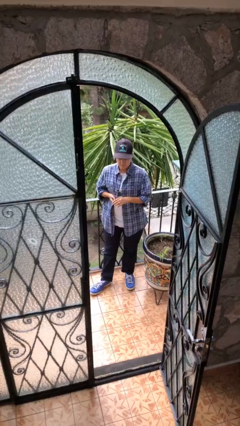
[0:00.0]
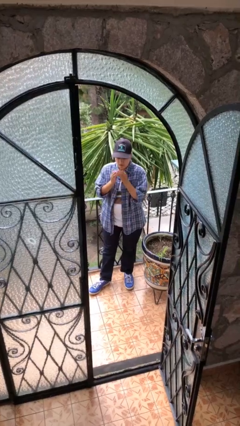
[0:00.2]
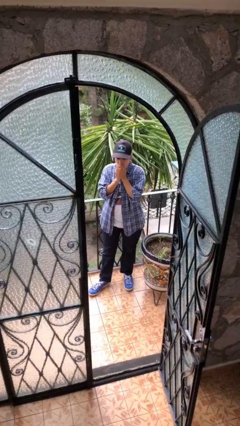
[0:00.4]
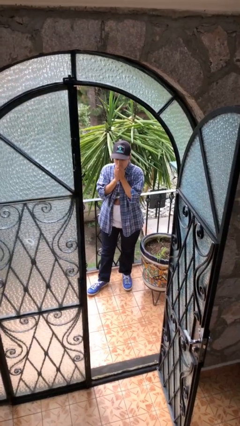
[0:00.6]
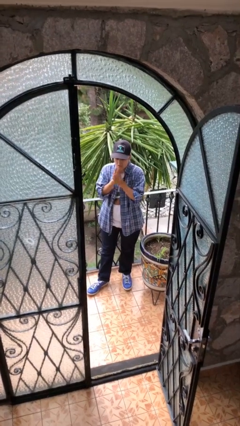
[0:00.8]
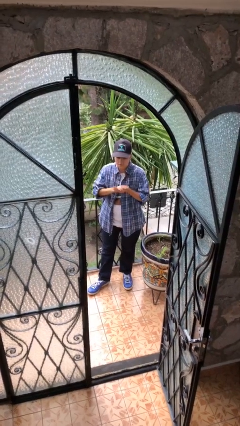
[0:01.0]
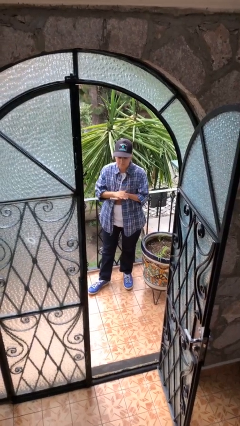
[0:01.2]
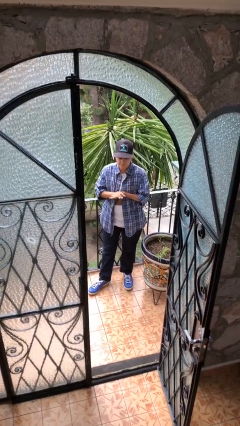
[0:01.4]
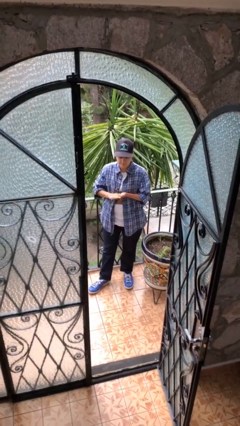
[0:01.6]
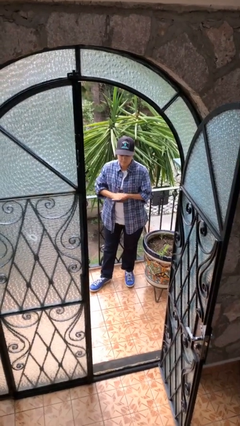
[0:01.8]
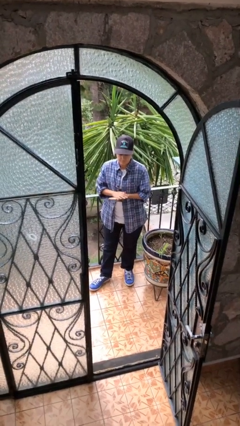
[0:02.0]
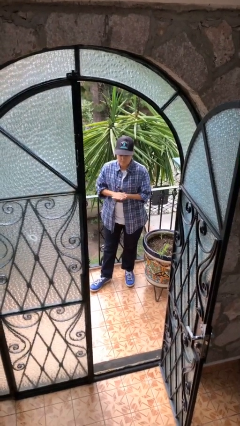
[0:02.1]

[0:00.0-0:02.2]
person blows into hands

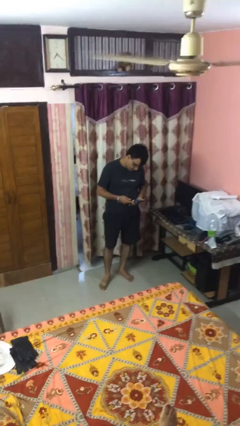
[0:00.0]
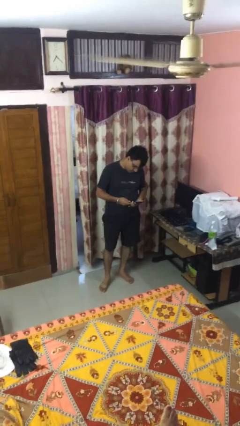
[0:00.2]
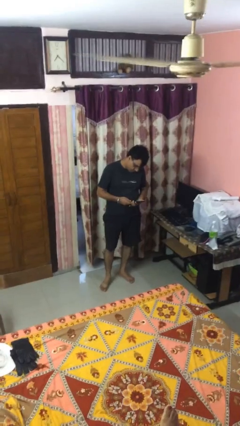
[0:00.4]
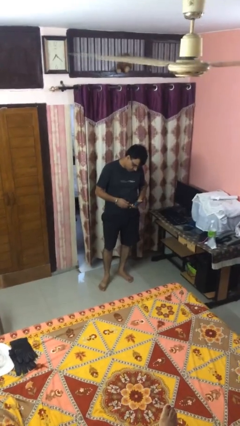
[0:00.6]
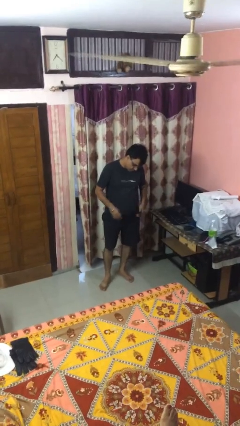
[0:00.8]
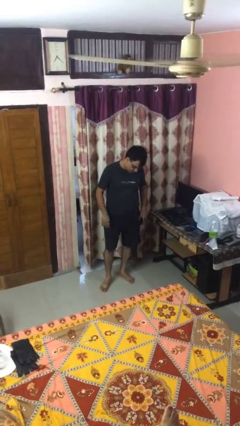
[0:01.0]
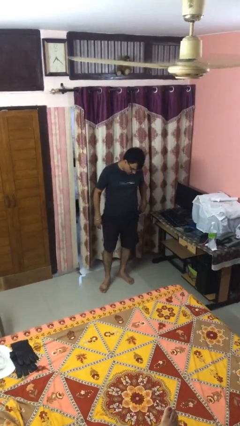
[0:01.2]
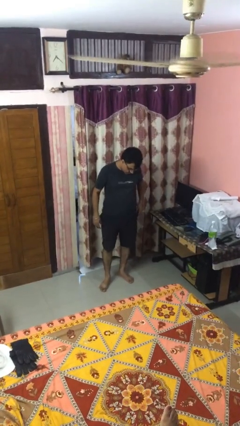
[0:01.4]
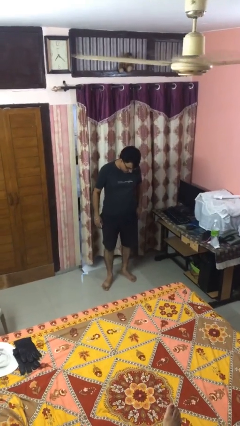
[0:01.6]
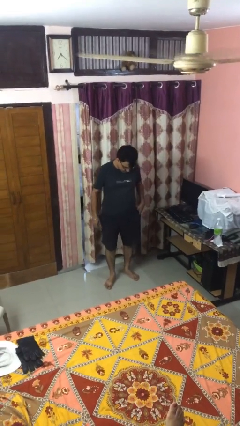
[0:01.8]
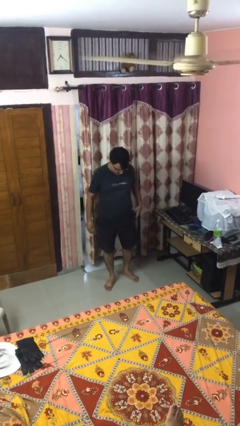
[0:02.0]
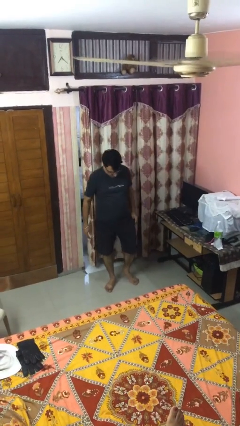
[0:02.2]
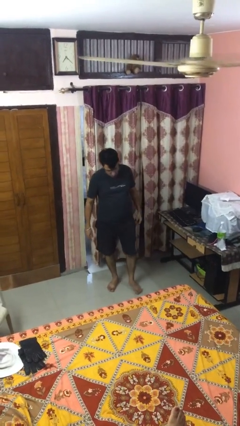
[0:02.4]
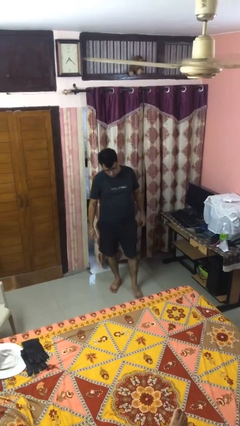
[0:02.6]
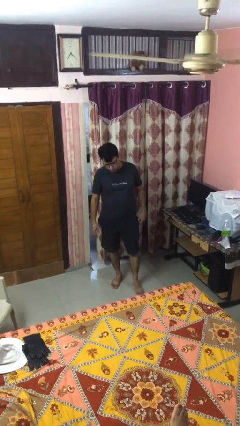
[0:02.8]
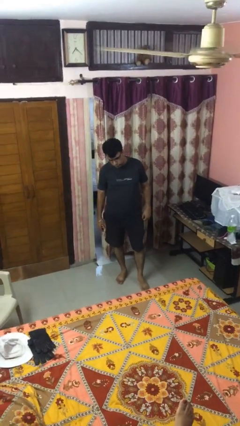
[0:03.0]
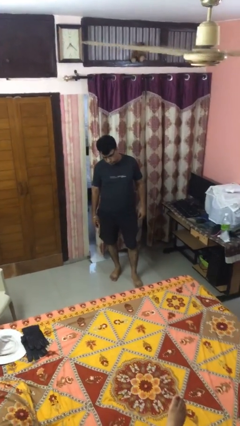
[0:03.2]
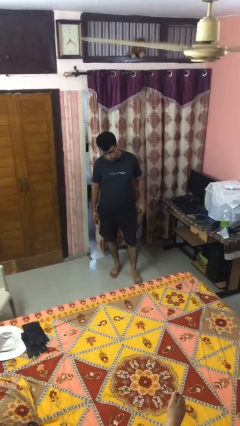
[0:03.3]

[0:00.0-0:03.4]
person puts phone into pocket

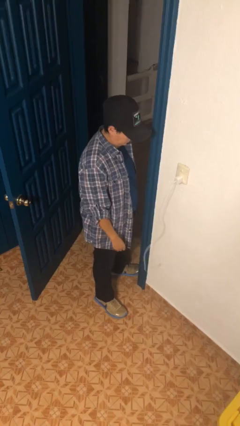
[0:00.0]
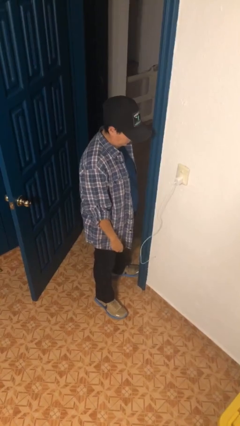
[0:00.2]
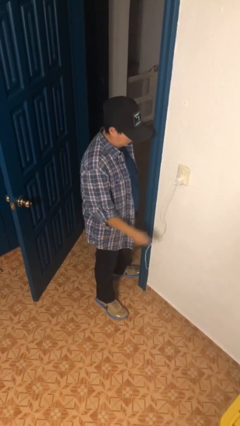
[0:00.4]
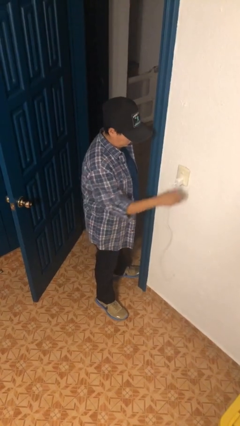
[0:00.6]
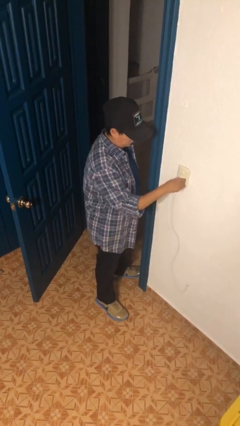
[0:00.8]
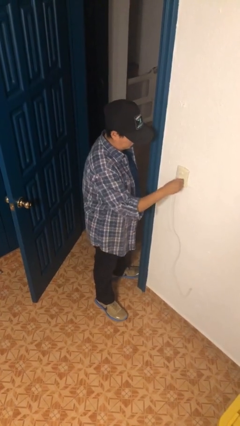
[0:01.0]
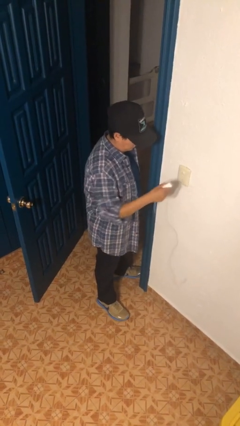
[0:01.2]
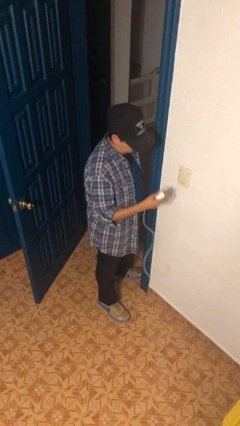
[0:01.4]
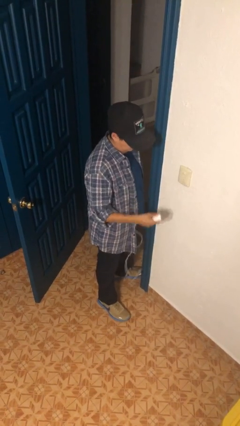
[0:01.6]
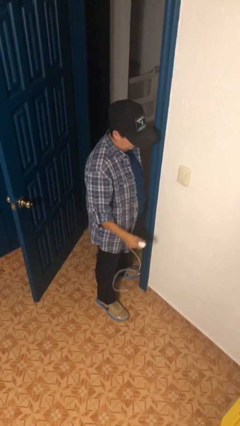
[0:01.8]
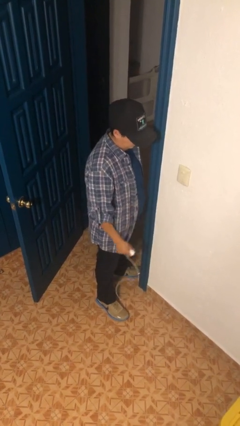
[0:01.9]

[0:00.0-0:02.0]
person unplugs from electrical socket

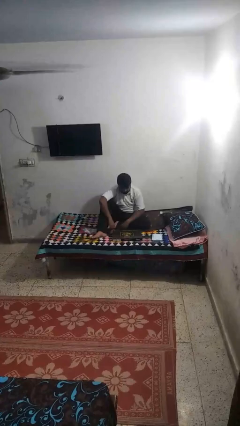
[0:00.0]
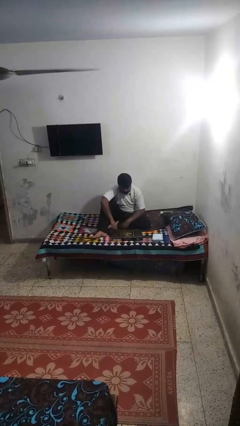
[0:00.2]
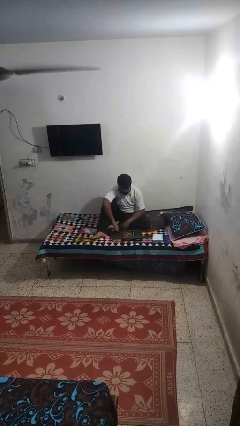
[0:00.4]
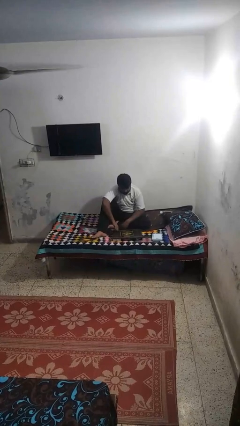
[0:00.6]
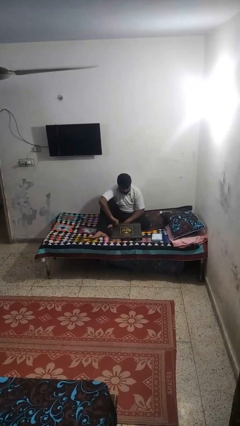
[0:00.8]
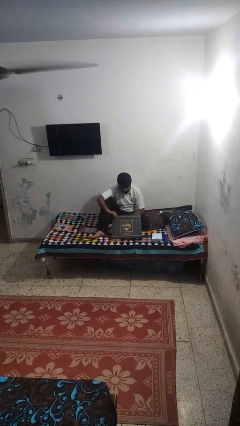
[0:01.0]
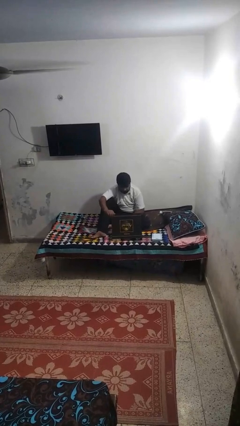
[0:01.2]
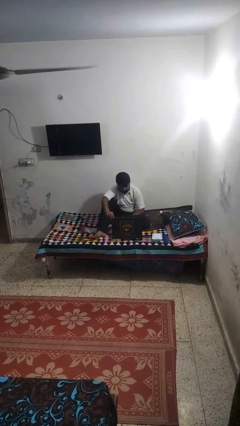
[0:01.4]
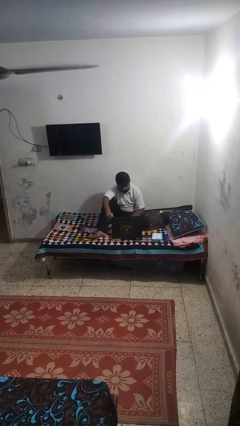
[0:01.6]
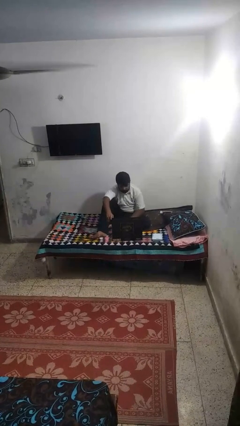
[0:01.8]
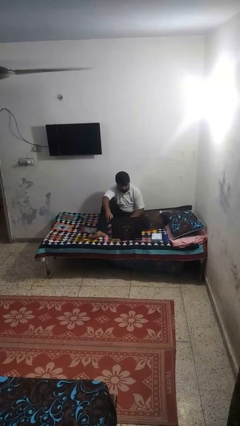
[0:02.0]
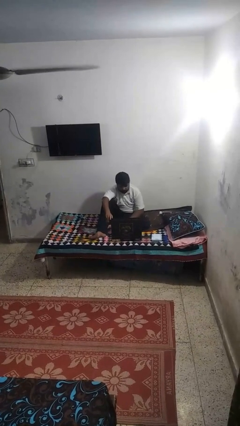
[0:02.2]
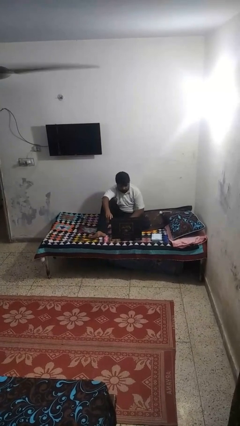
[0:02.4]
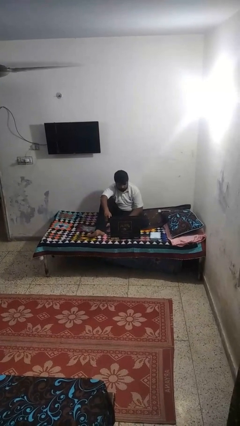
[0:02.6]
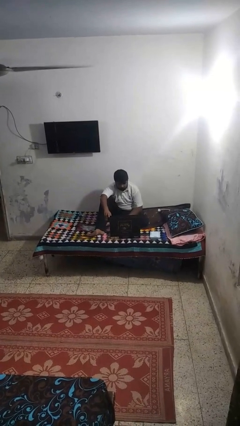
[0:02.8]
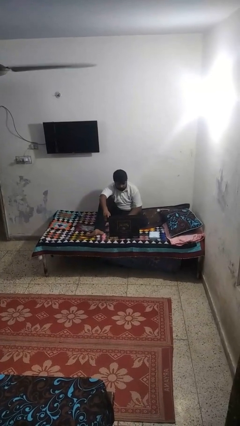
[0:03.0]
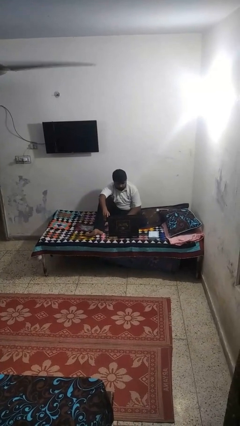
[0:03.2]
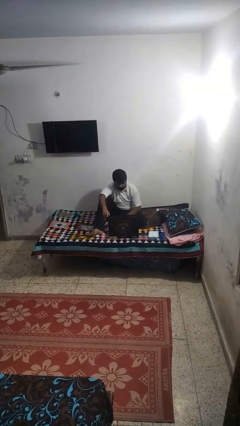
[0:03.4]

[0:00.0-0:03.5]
person opens laptop

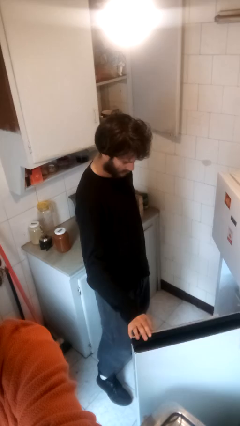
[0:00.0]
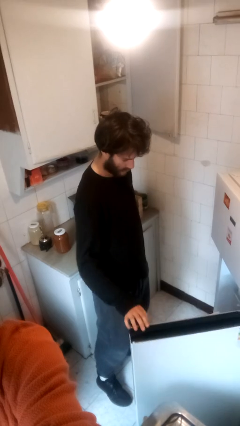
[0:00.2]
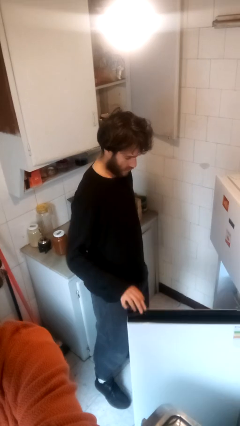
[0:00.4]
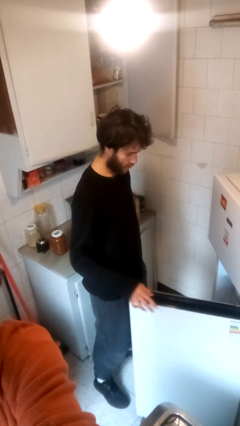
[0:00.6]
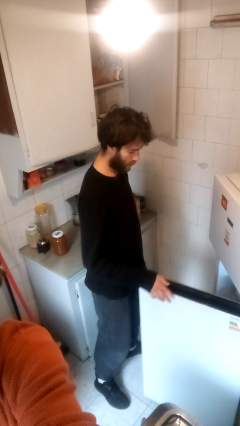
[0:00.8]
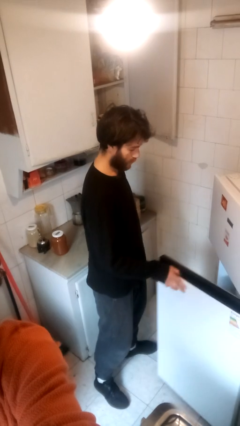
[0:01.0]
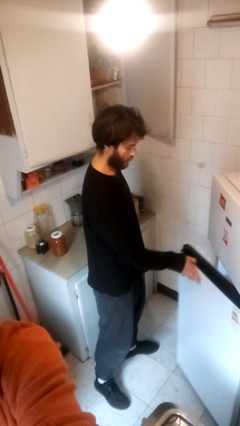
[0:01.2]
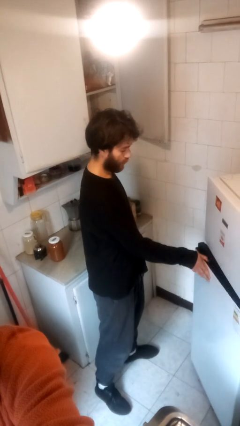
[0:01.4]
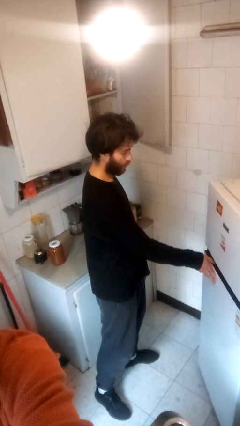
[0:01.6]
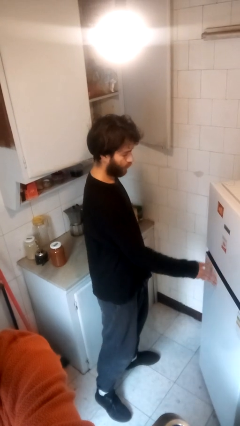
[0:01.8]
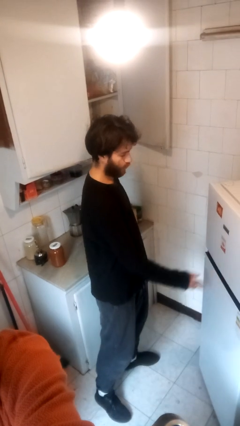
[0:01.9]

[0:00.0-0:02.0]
person closes refrigerator

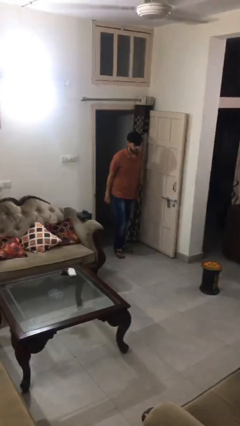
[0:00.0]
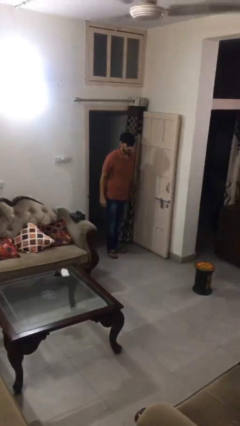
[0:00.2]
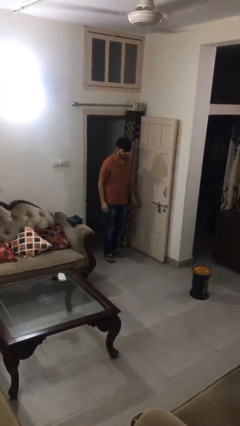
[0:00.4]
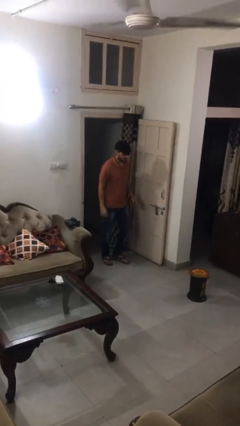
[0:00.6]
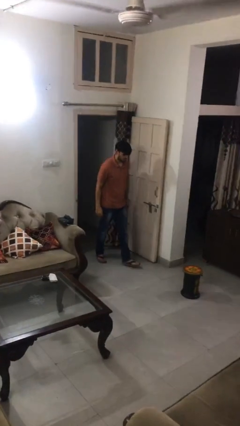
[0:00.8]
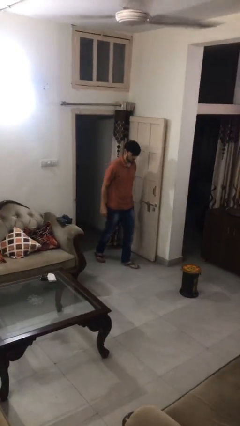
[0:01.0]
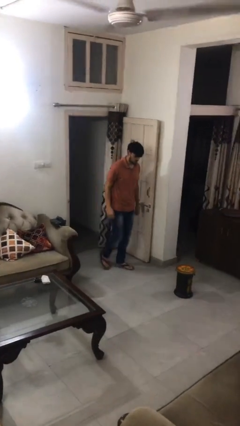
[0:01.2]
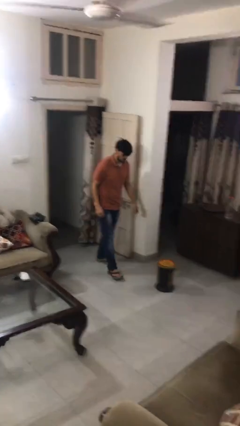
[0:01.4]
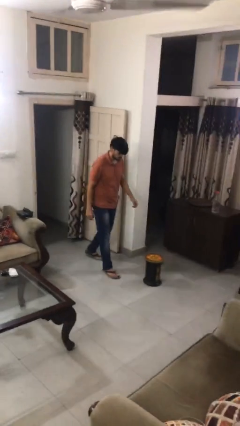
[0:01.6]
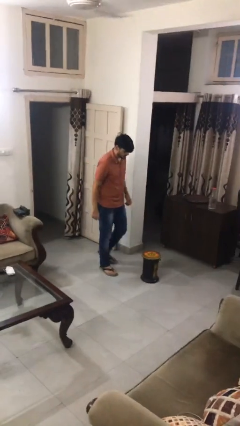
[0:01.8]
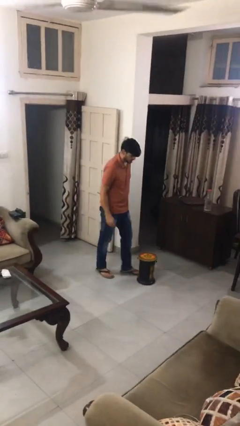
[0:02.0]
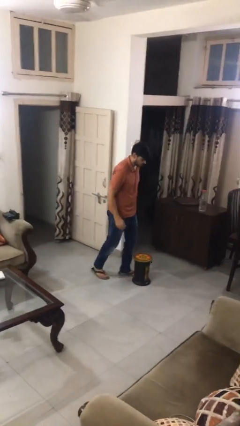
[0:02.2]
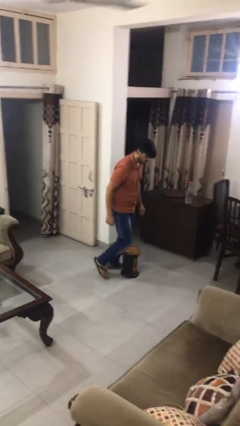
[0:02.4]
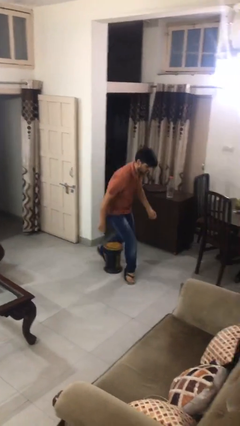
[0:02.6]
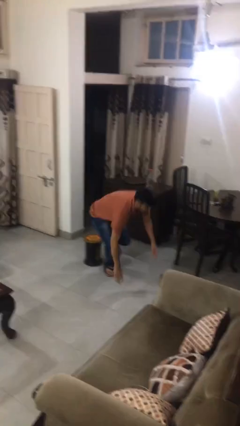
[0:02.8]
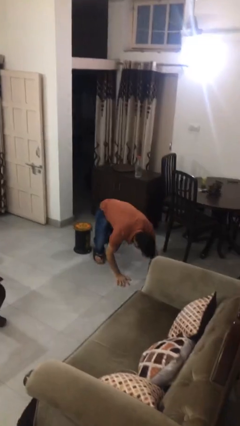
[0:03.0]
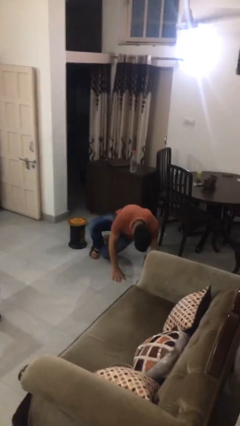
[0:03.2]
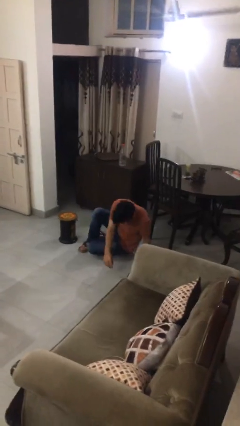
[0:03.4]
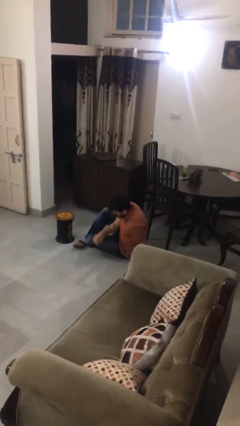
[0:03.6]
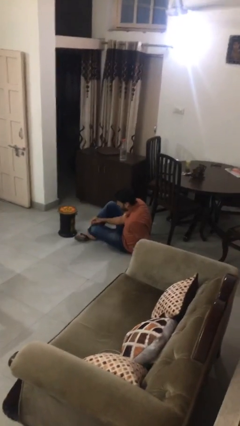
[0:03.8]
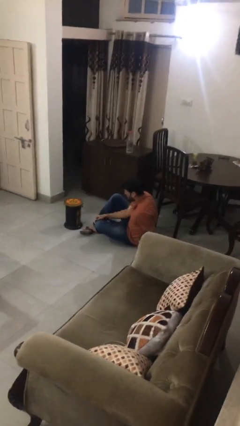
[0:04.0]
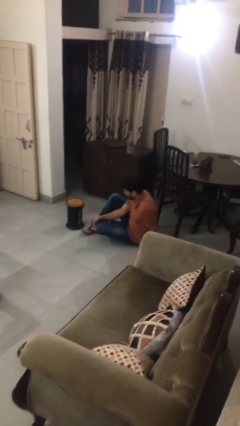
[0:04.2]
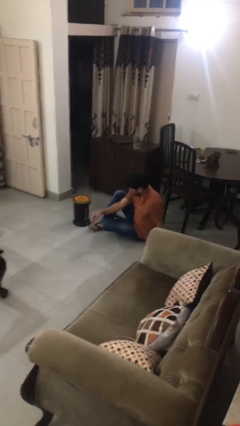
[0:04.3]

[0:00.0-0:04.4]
person trips on object on floor
